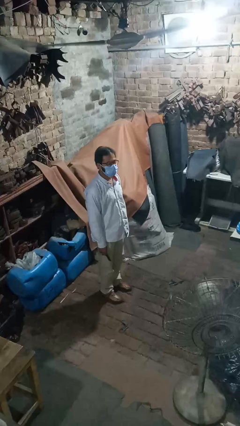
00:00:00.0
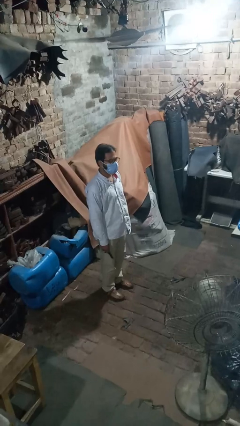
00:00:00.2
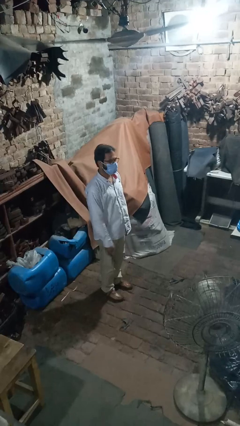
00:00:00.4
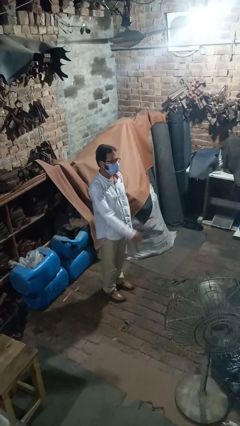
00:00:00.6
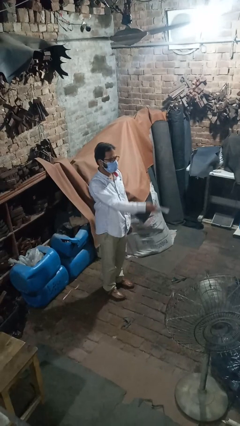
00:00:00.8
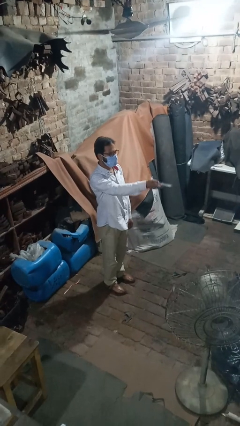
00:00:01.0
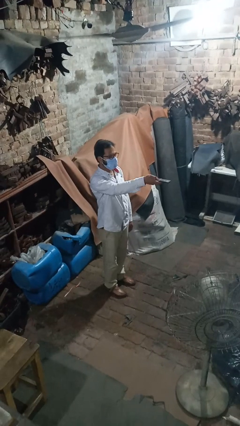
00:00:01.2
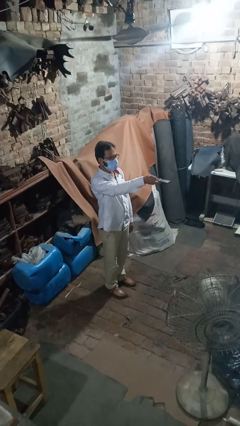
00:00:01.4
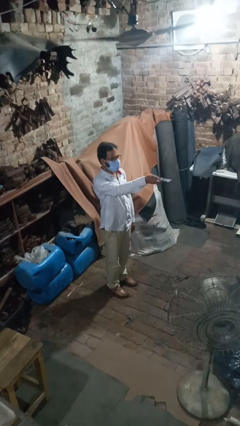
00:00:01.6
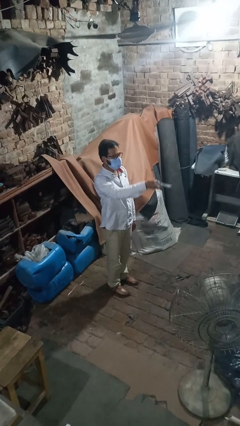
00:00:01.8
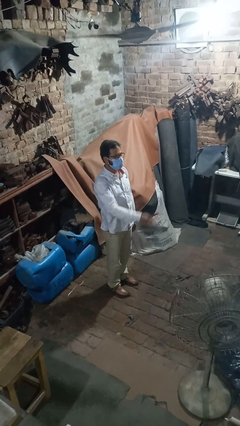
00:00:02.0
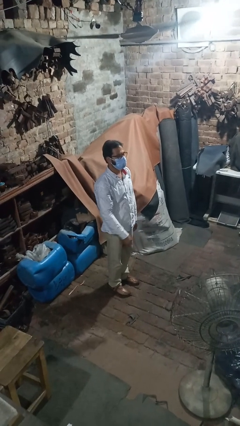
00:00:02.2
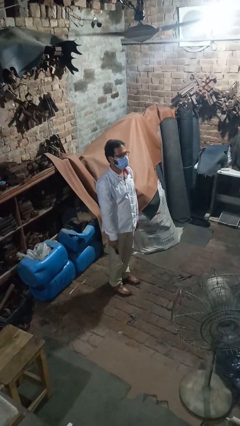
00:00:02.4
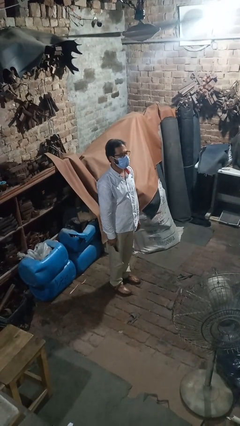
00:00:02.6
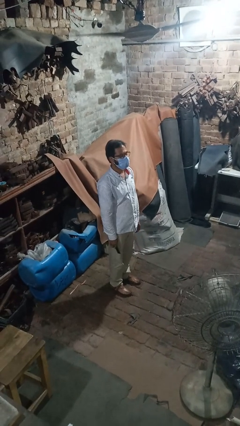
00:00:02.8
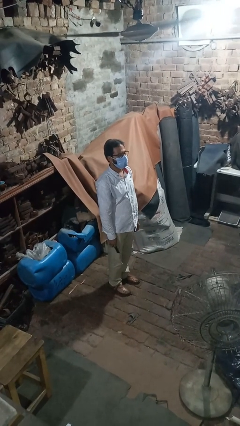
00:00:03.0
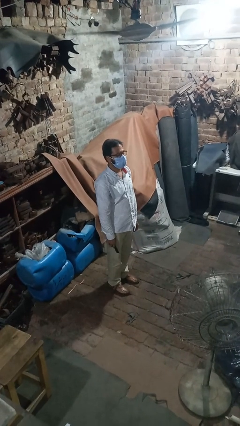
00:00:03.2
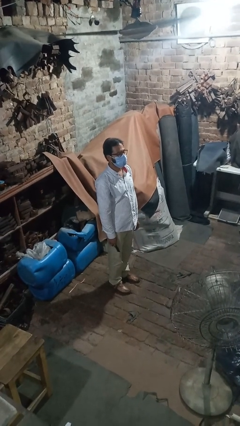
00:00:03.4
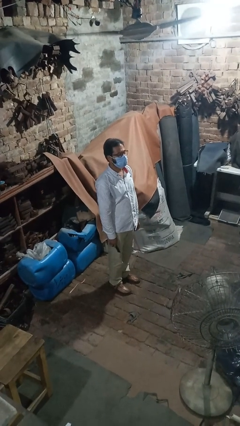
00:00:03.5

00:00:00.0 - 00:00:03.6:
person uses television remote

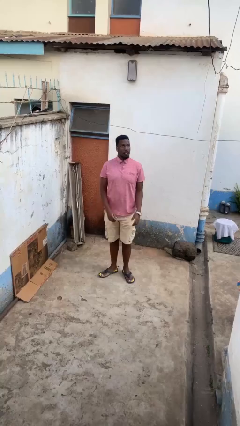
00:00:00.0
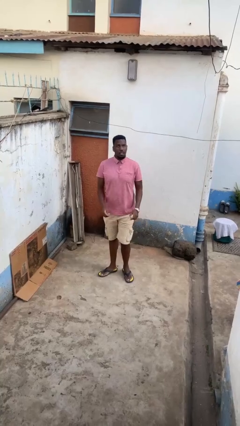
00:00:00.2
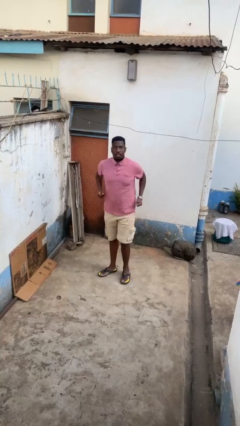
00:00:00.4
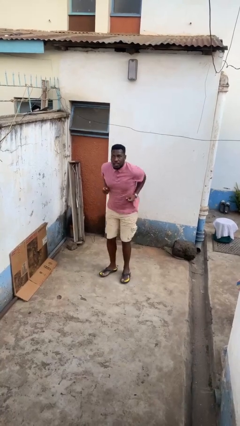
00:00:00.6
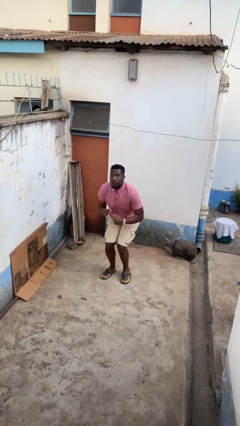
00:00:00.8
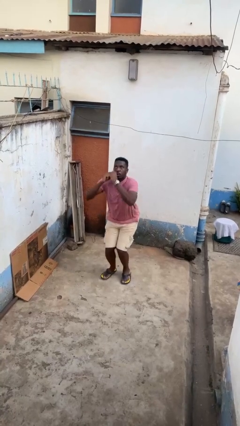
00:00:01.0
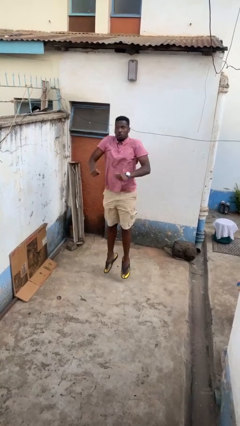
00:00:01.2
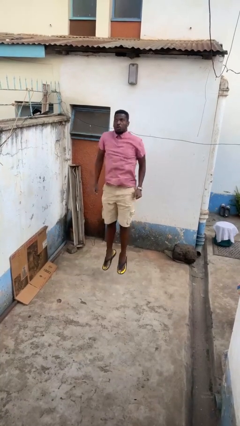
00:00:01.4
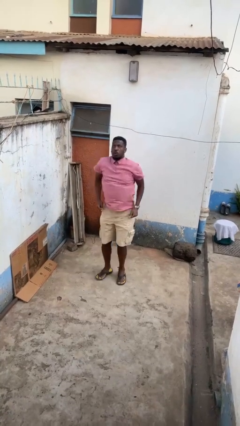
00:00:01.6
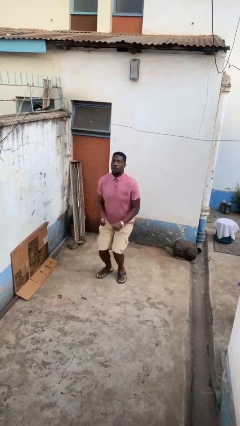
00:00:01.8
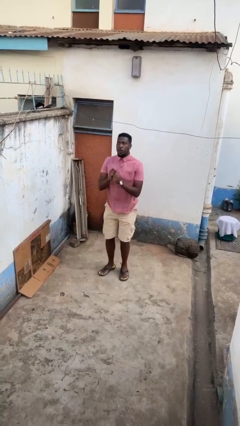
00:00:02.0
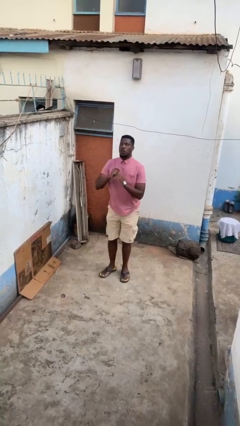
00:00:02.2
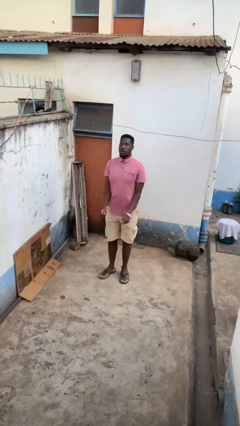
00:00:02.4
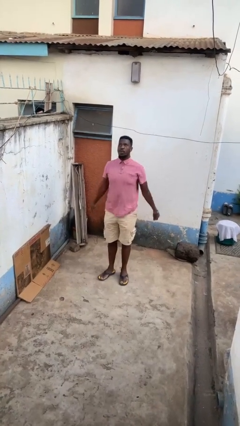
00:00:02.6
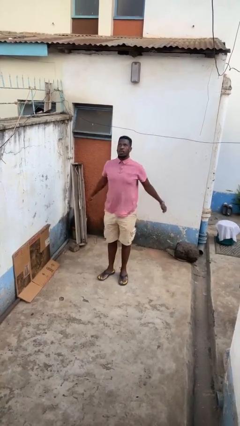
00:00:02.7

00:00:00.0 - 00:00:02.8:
person jumps

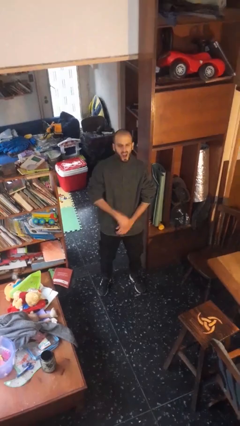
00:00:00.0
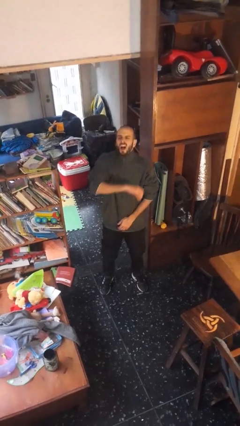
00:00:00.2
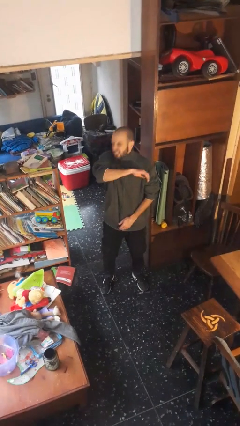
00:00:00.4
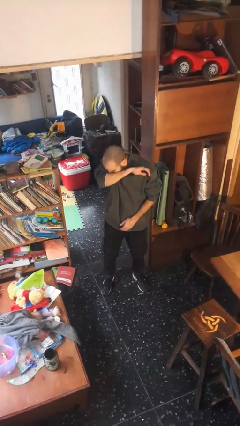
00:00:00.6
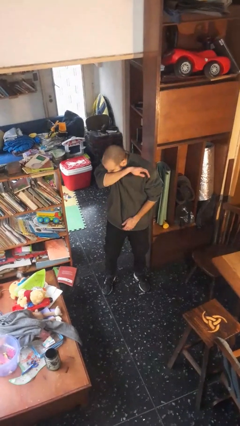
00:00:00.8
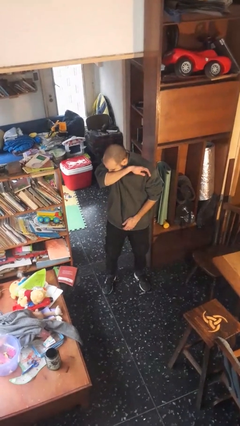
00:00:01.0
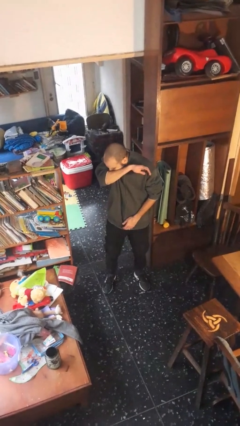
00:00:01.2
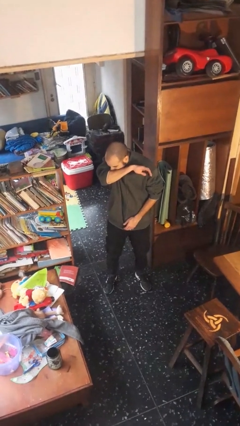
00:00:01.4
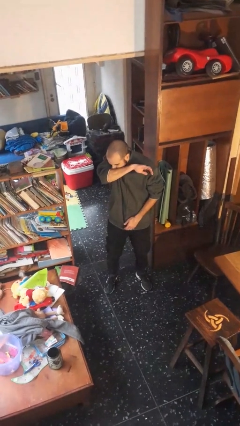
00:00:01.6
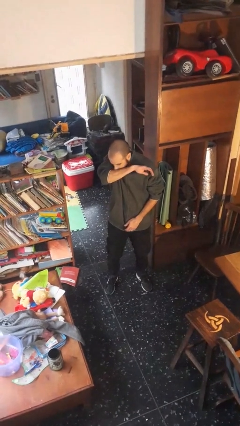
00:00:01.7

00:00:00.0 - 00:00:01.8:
person sneezes into arm

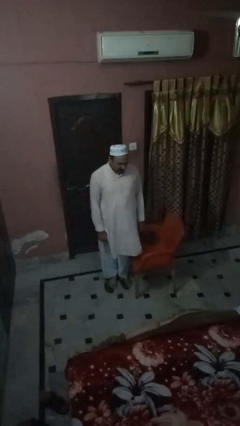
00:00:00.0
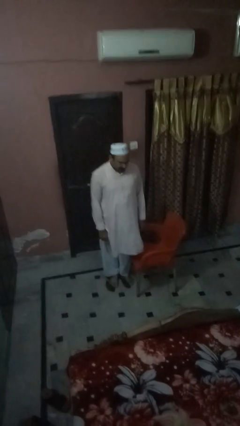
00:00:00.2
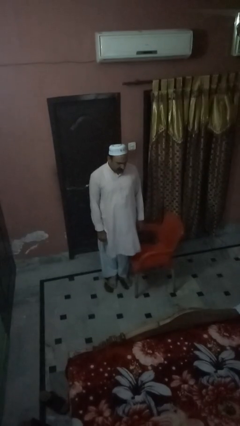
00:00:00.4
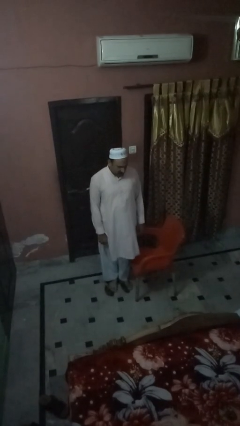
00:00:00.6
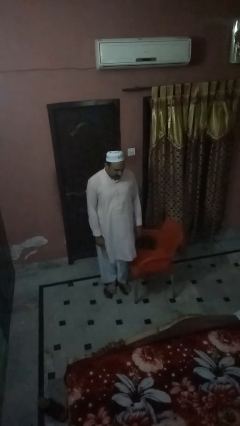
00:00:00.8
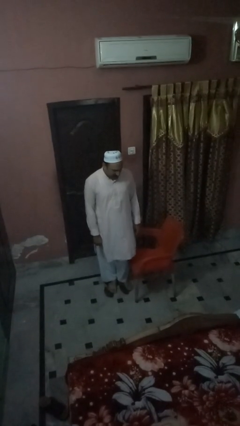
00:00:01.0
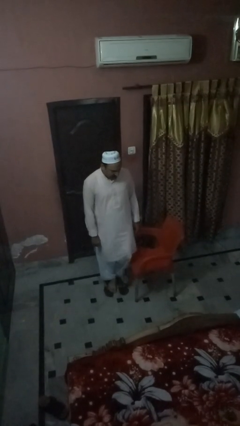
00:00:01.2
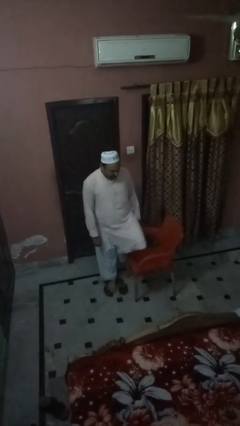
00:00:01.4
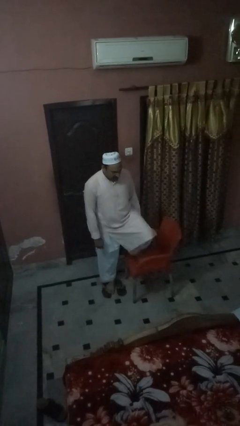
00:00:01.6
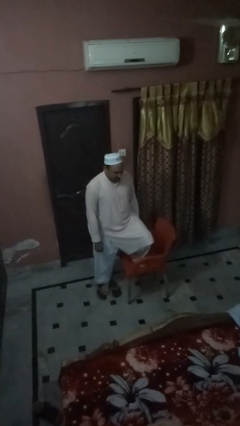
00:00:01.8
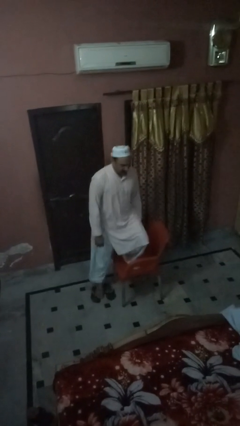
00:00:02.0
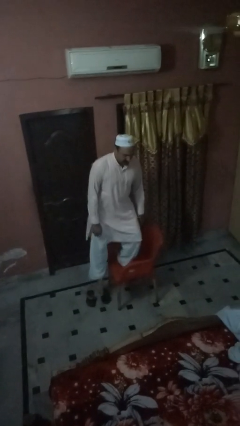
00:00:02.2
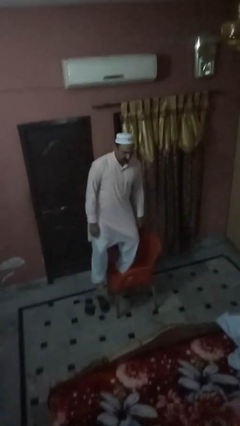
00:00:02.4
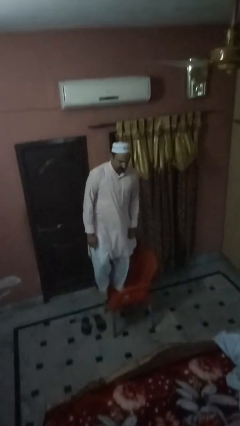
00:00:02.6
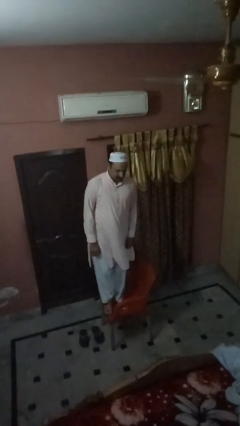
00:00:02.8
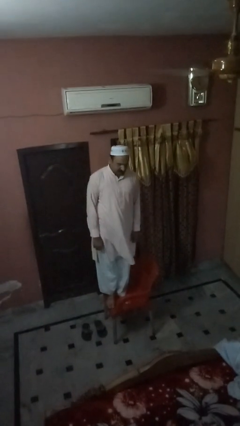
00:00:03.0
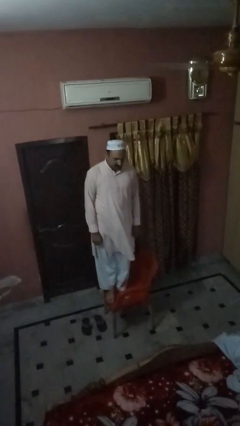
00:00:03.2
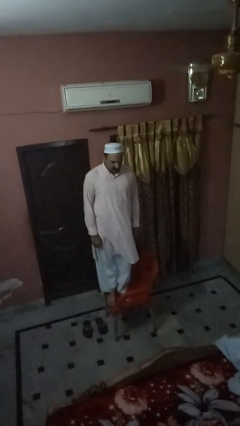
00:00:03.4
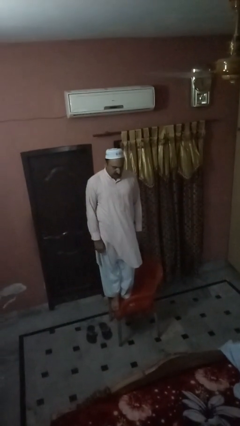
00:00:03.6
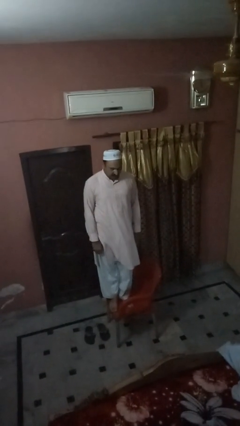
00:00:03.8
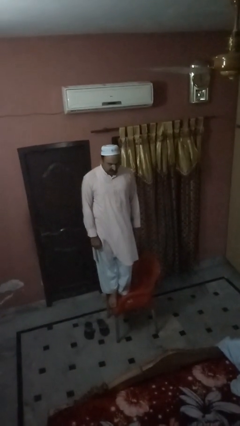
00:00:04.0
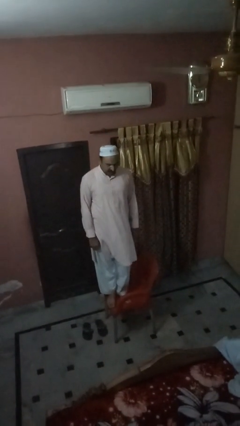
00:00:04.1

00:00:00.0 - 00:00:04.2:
person climbs on chair

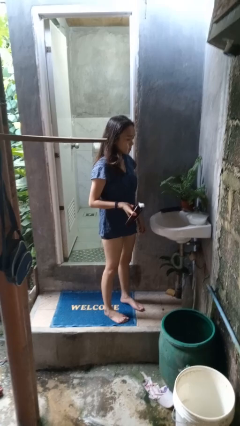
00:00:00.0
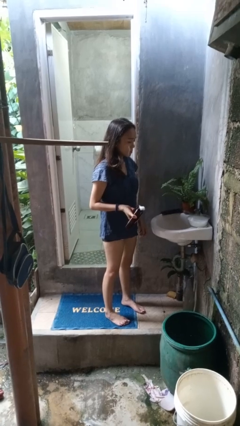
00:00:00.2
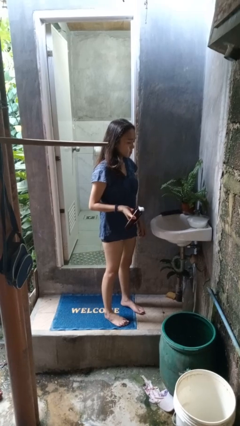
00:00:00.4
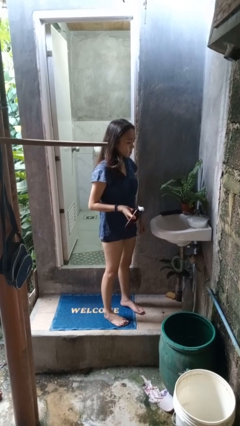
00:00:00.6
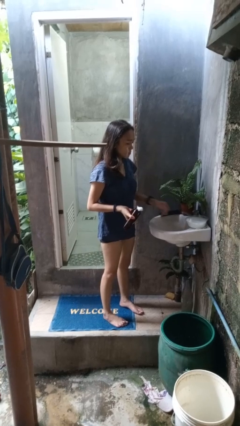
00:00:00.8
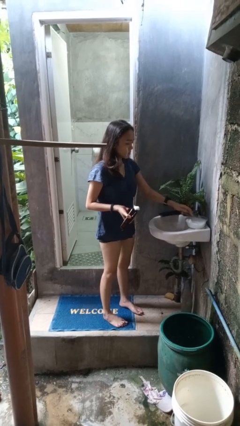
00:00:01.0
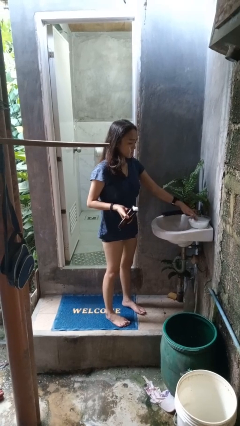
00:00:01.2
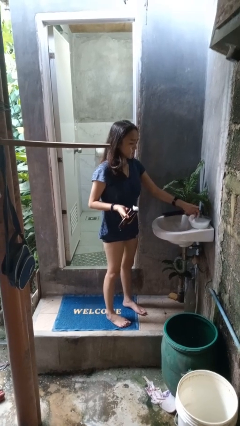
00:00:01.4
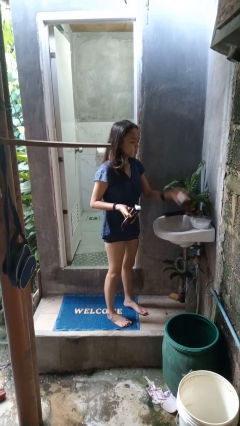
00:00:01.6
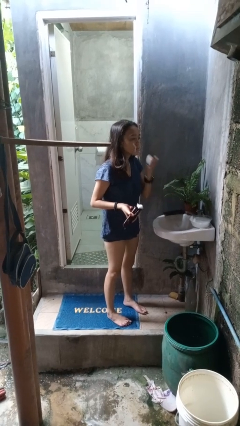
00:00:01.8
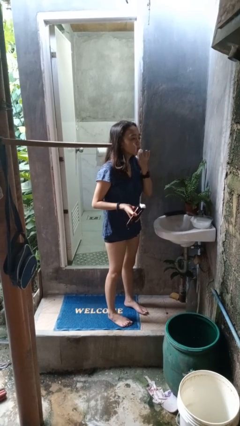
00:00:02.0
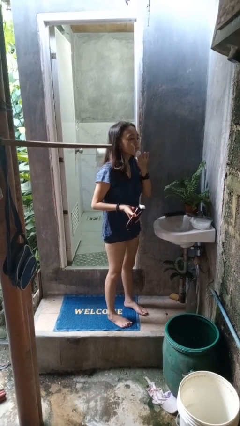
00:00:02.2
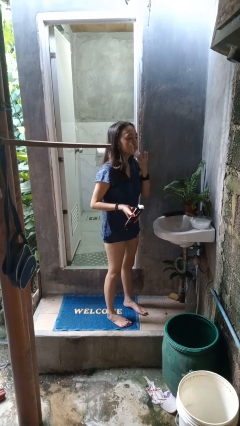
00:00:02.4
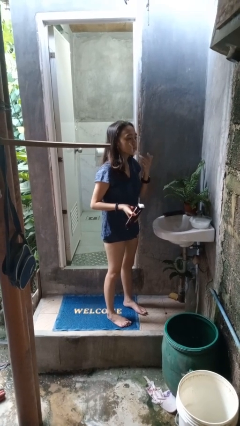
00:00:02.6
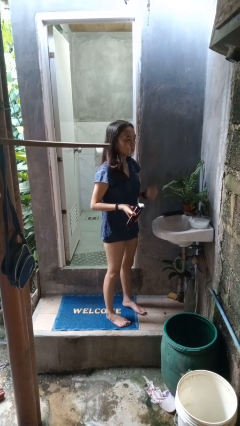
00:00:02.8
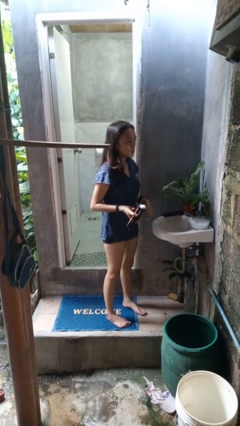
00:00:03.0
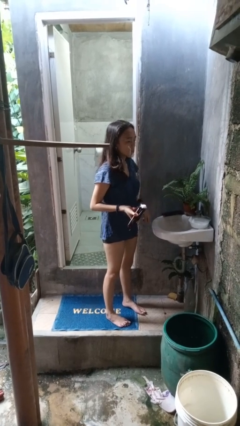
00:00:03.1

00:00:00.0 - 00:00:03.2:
person applies shaving cream

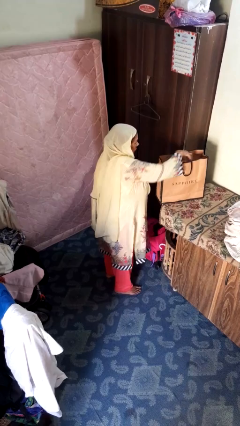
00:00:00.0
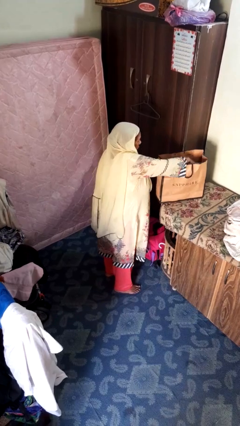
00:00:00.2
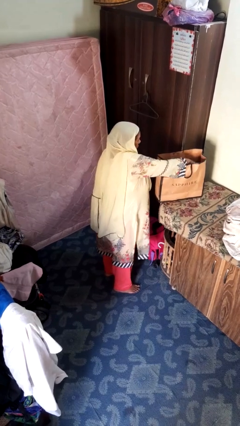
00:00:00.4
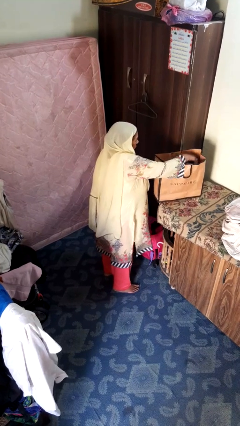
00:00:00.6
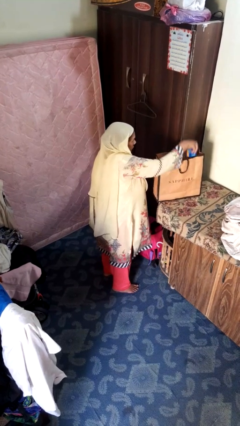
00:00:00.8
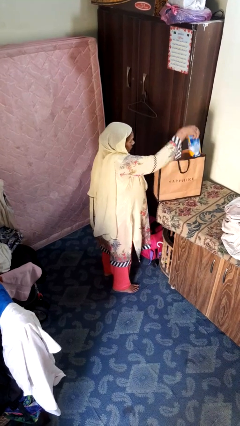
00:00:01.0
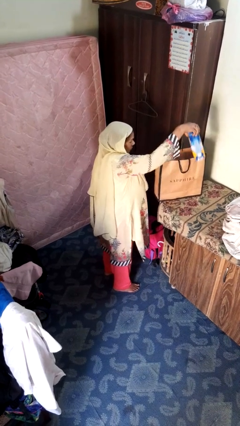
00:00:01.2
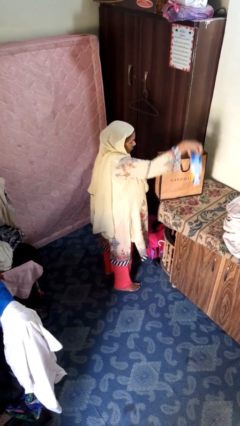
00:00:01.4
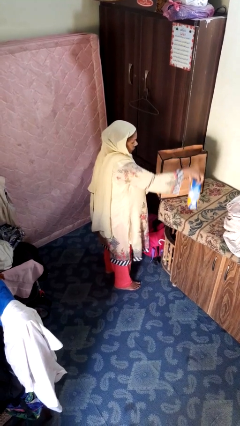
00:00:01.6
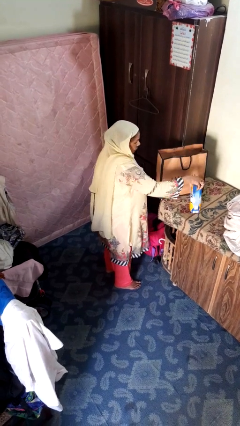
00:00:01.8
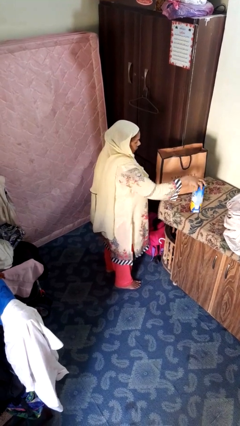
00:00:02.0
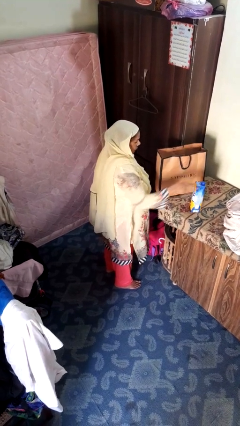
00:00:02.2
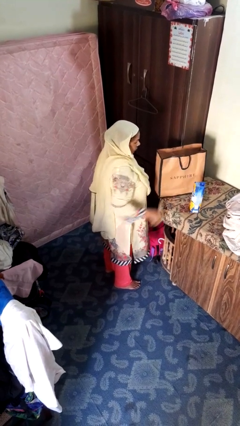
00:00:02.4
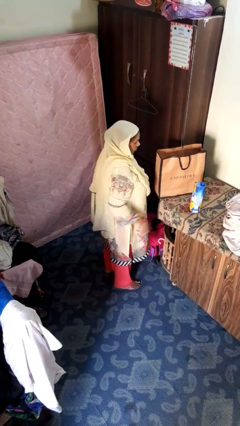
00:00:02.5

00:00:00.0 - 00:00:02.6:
person takes object from bag
